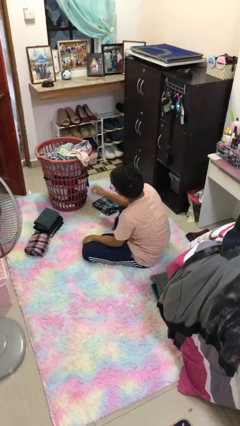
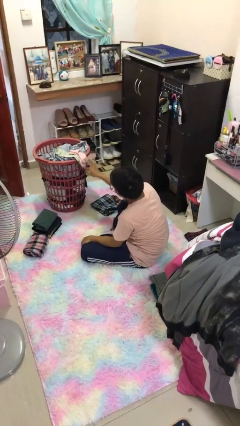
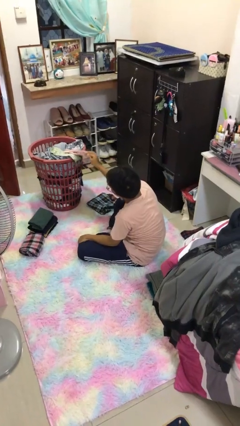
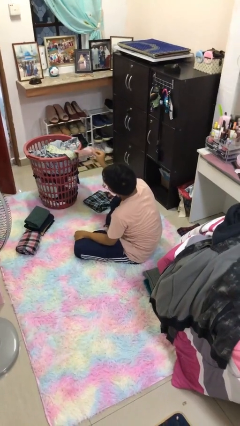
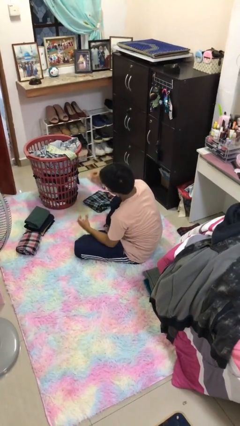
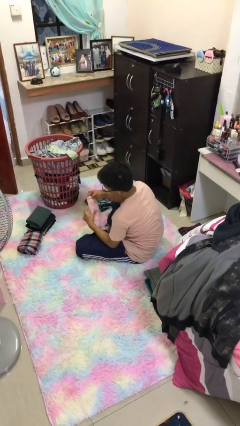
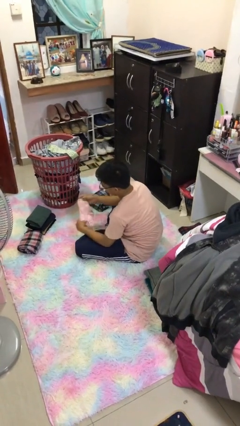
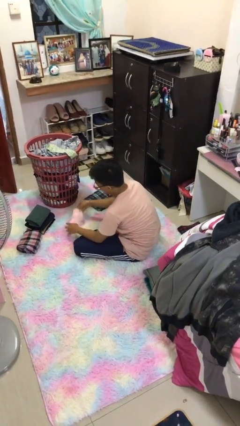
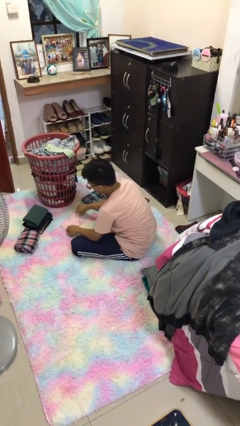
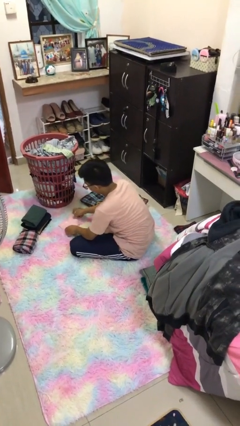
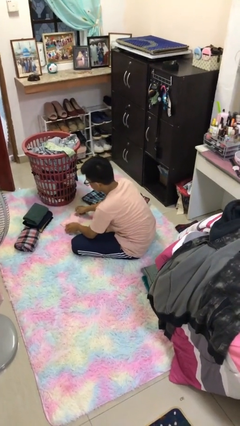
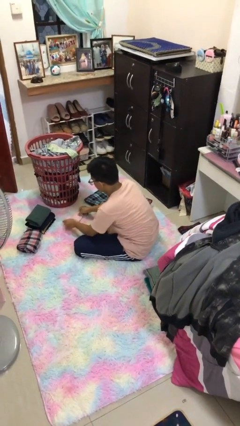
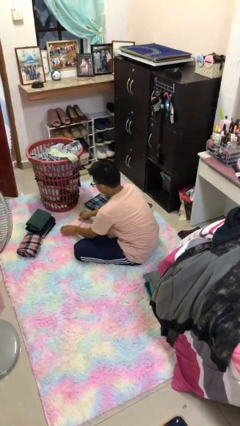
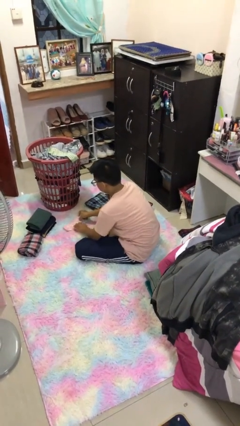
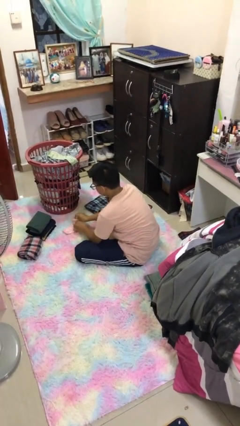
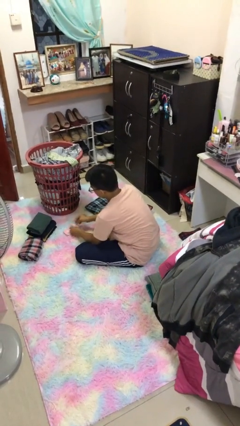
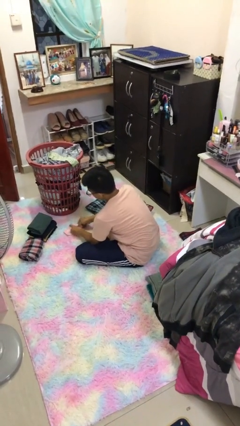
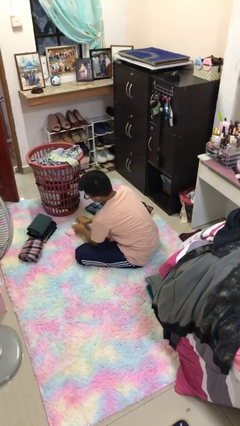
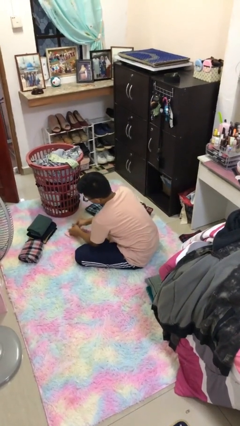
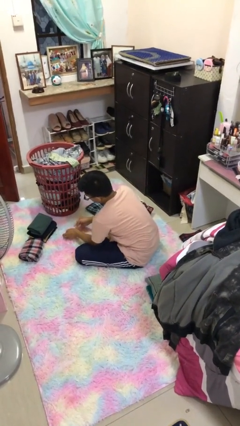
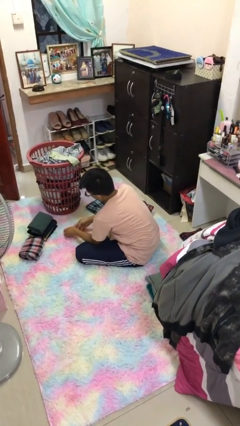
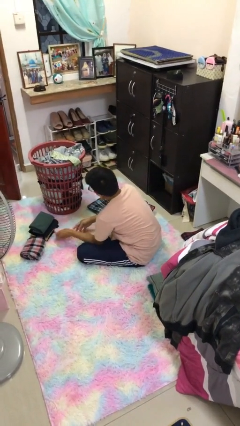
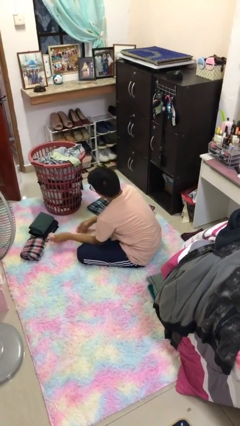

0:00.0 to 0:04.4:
person folds socks

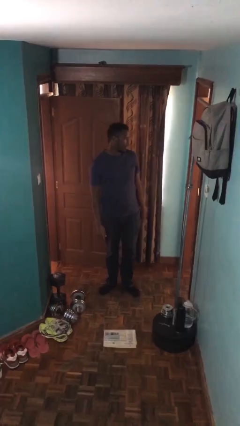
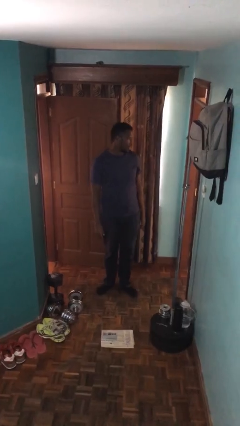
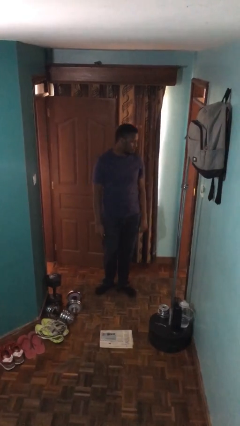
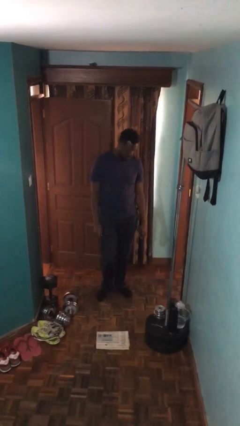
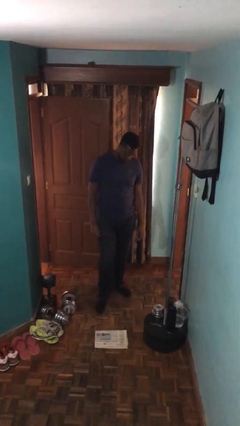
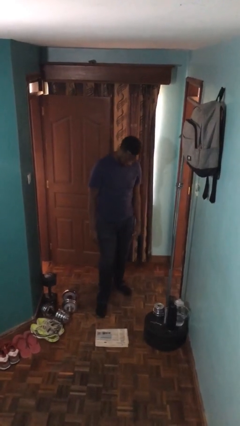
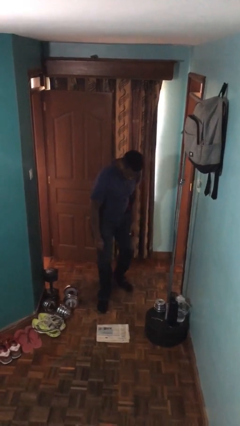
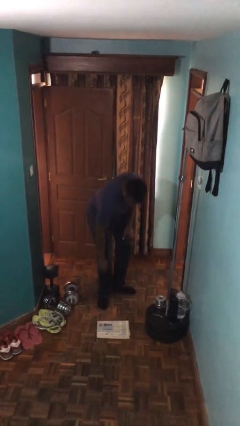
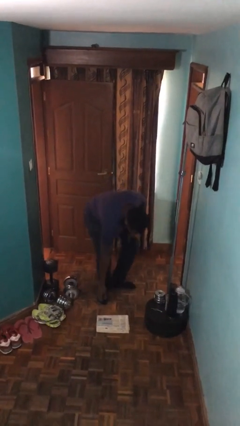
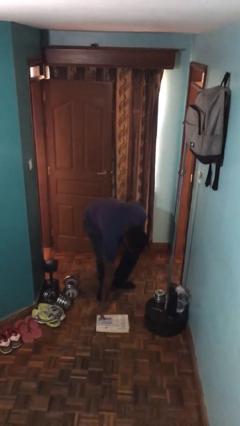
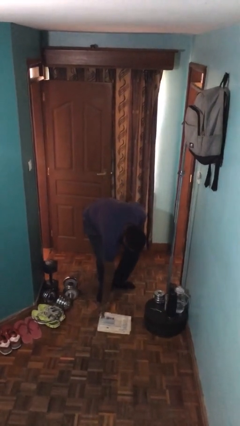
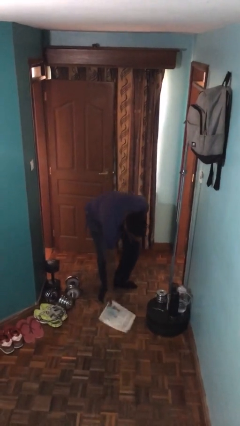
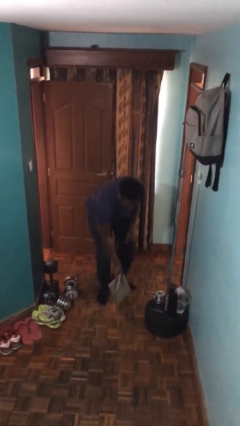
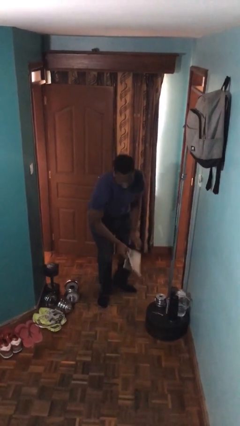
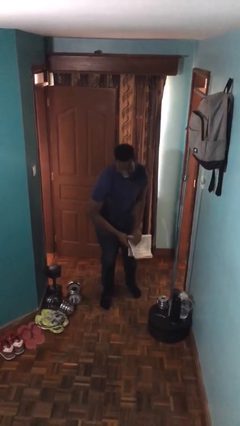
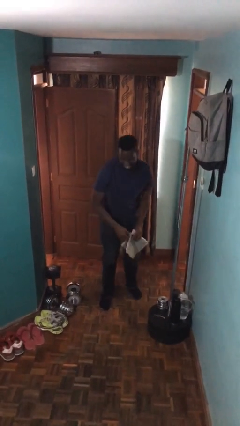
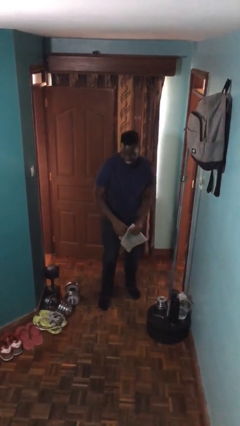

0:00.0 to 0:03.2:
person picks up object from floor

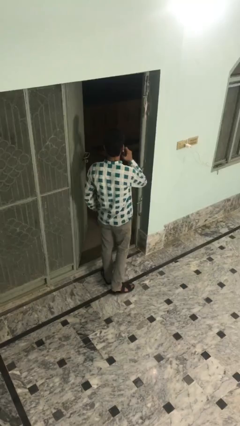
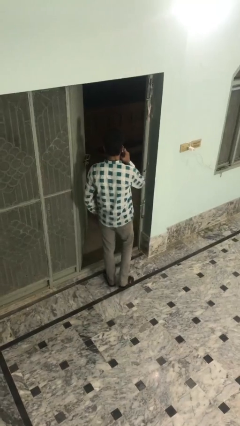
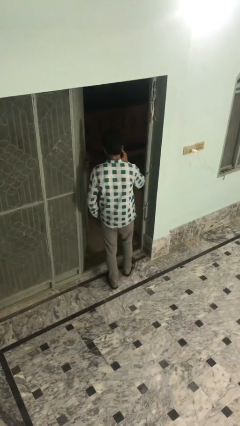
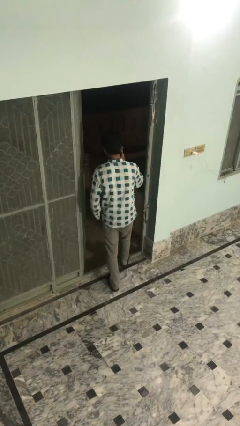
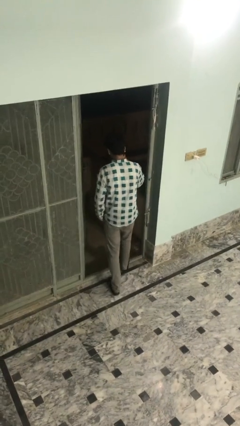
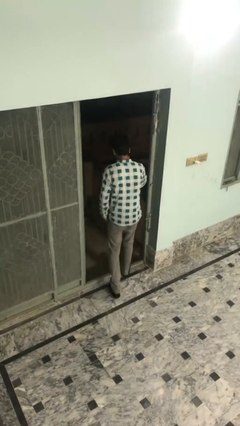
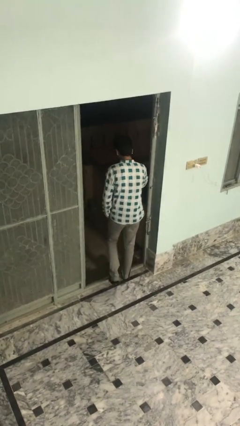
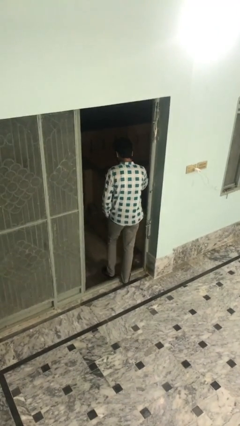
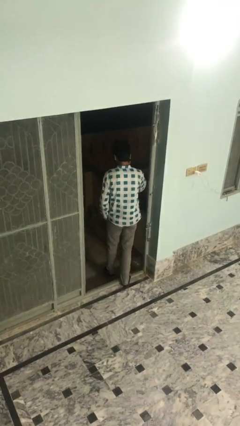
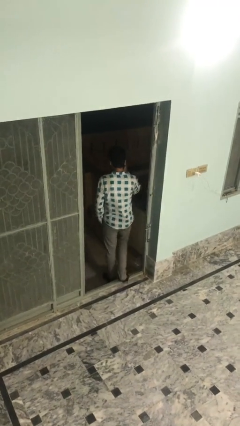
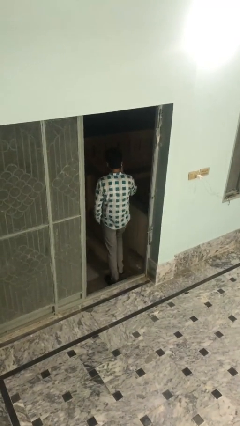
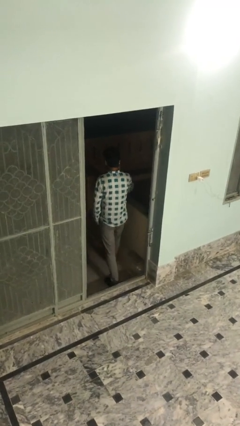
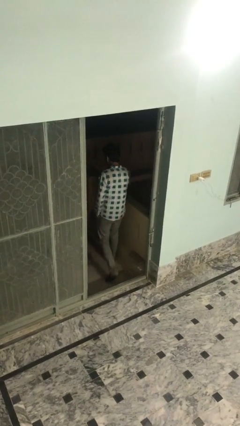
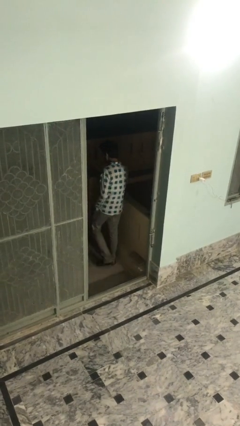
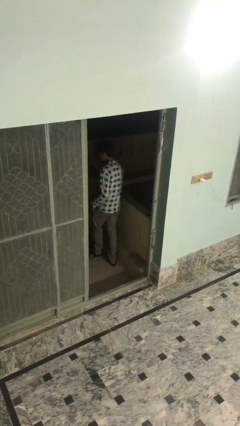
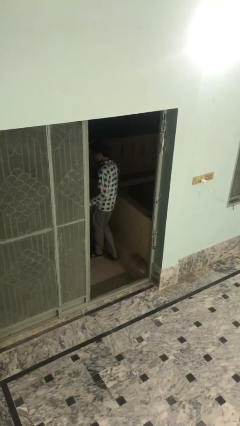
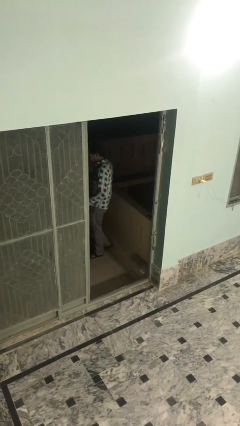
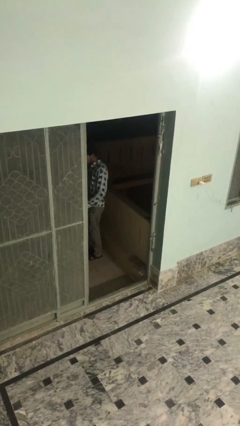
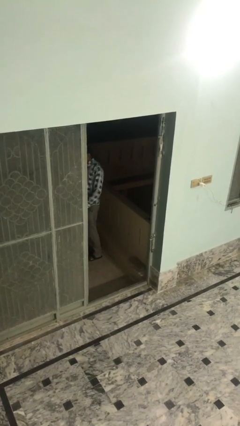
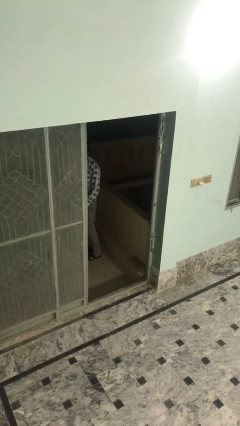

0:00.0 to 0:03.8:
person exits scene through structure

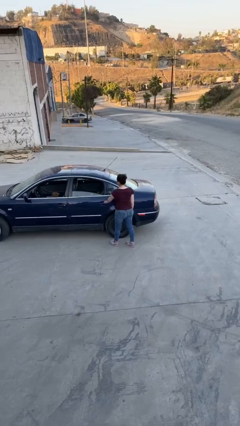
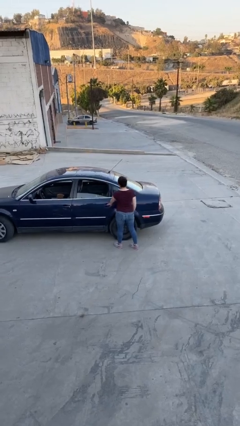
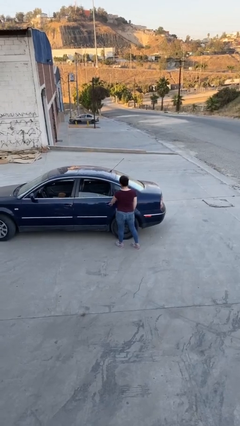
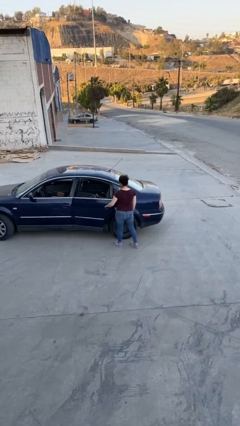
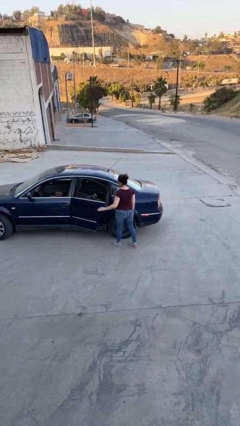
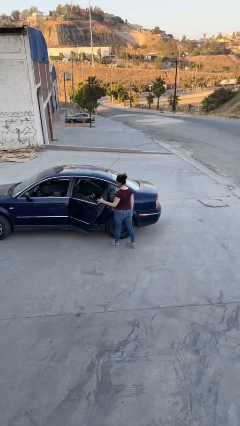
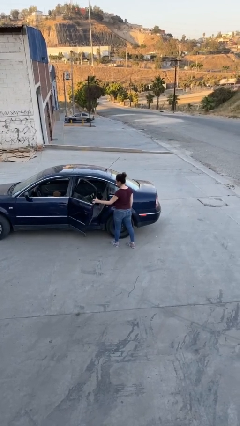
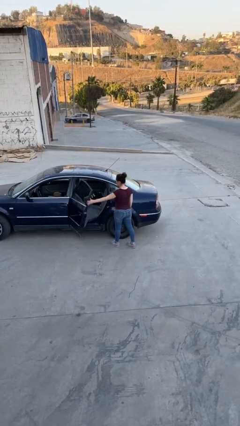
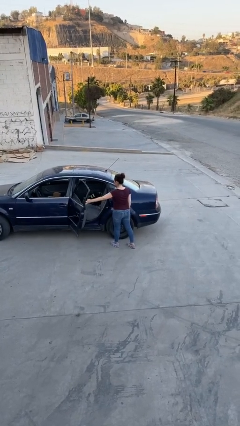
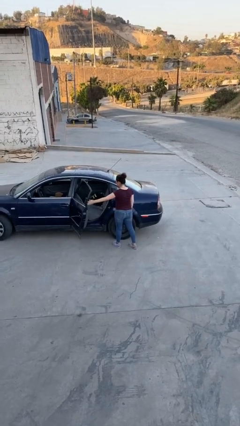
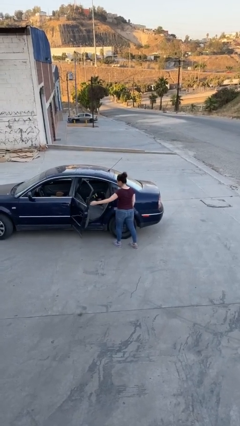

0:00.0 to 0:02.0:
person opens car door

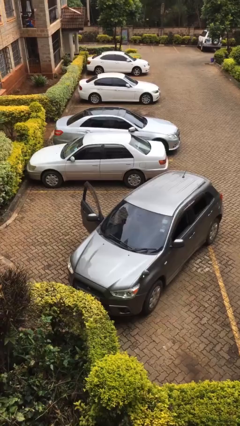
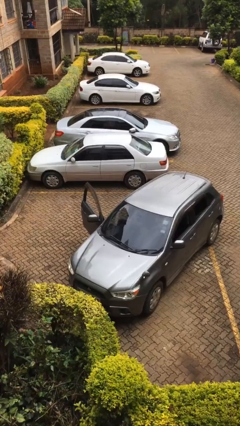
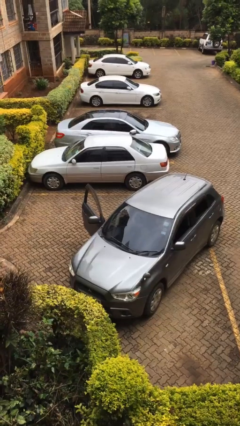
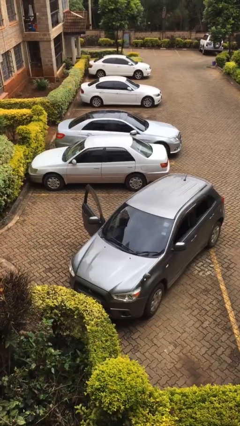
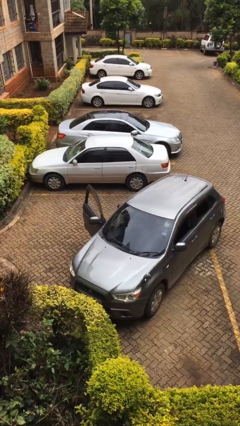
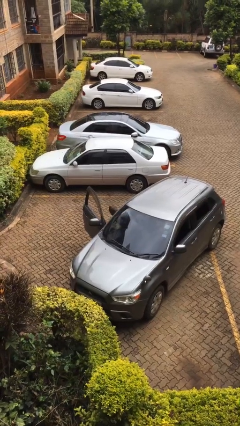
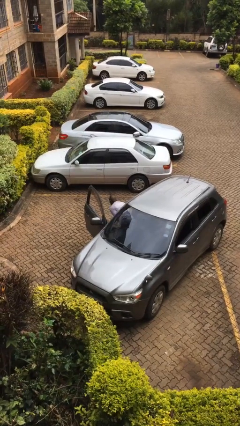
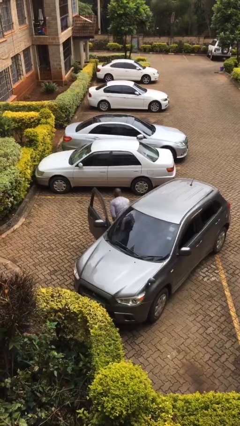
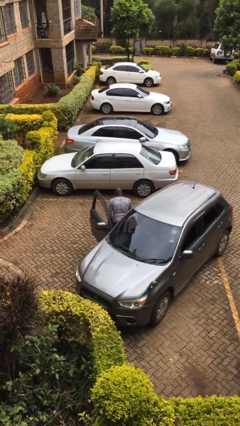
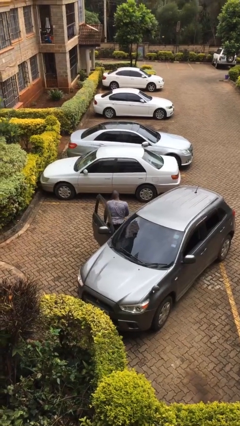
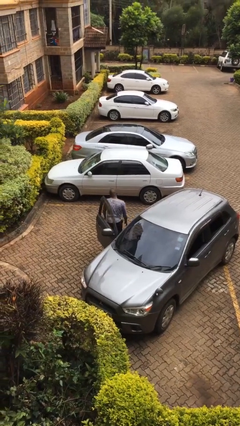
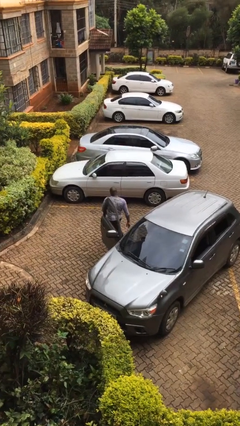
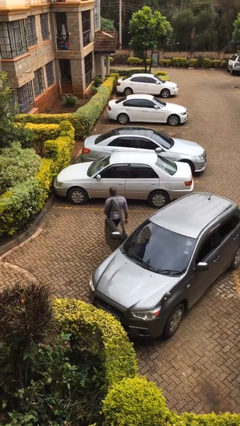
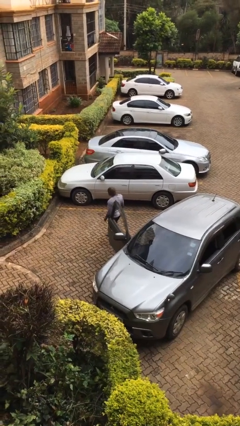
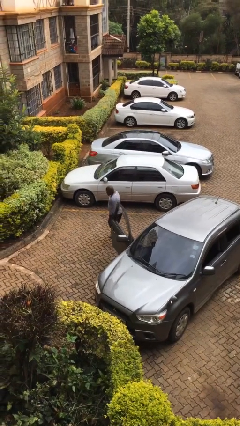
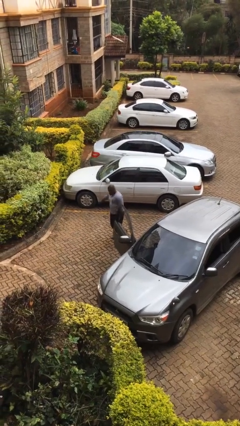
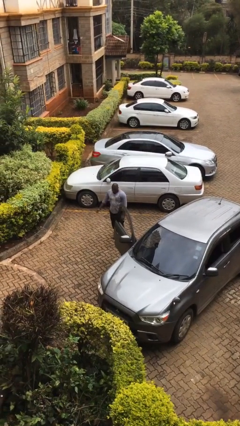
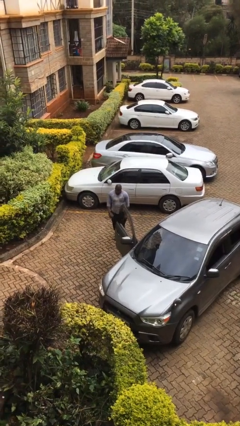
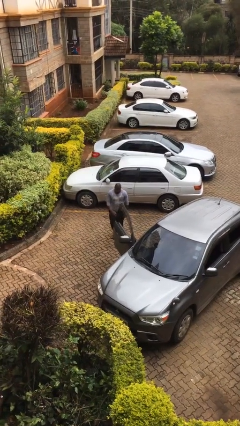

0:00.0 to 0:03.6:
person exits car

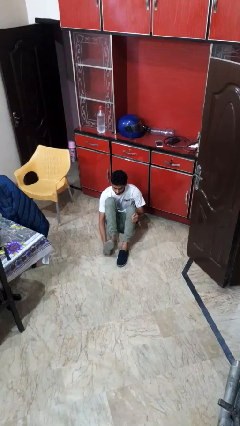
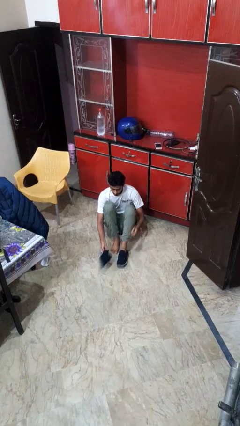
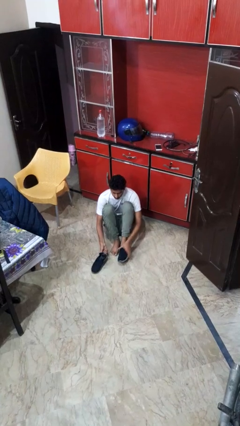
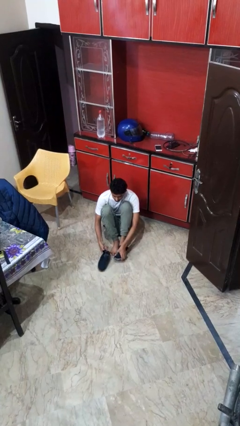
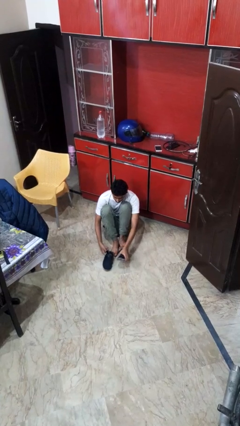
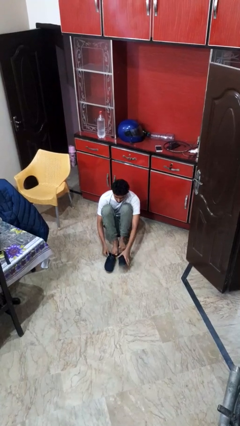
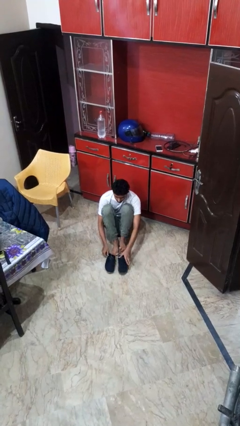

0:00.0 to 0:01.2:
person takes off shoes
